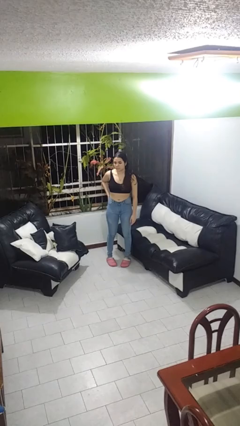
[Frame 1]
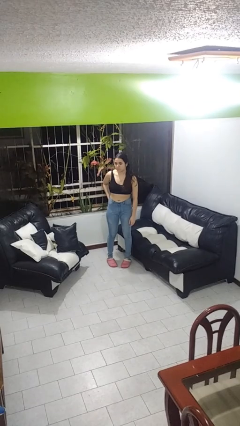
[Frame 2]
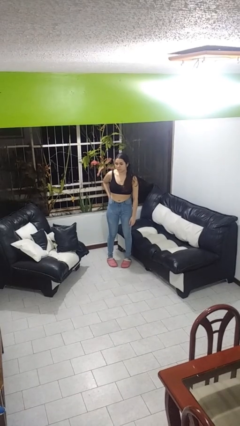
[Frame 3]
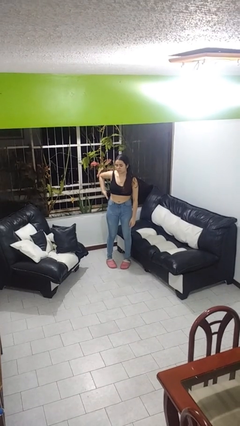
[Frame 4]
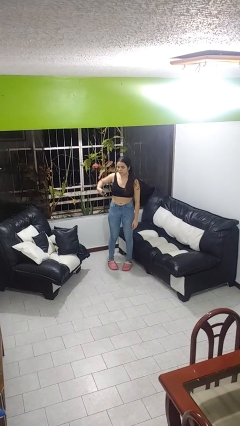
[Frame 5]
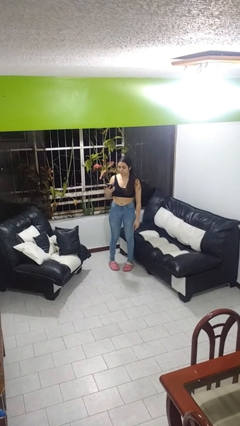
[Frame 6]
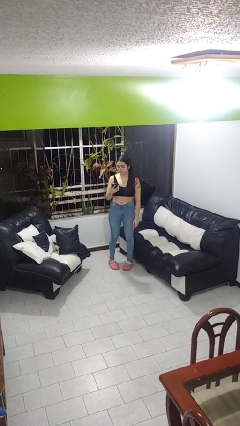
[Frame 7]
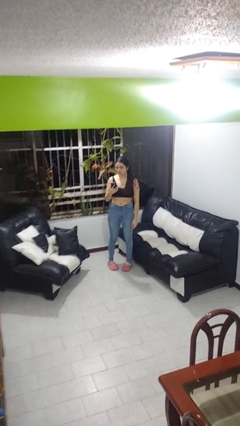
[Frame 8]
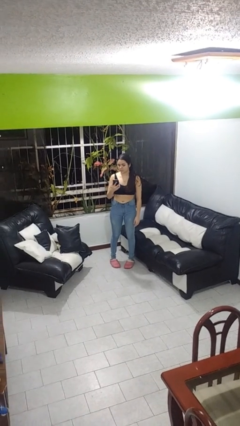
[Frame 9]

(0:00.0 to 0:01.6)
person takes phone from pocket

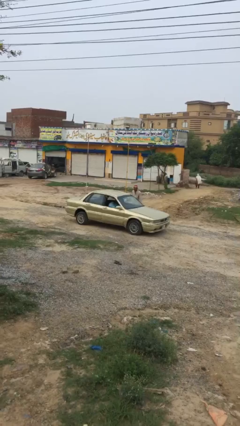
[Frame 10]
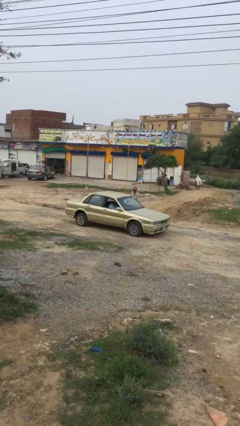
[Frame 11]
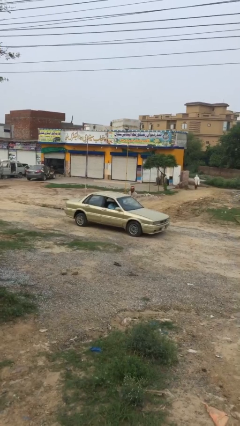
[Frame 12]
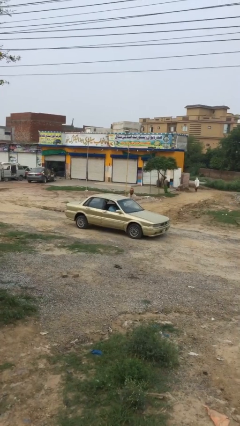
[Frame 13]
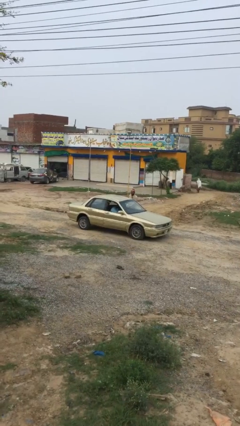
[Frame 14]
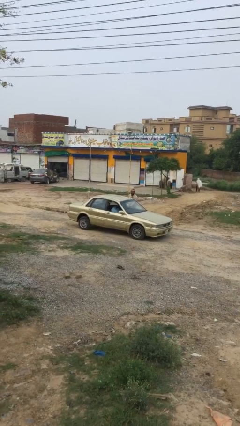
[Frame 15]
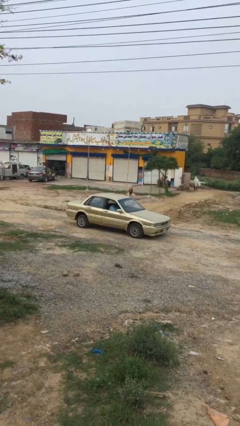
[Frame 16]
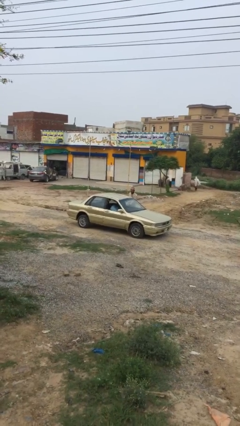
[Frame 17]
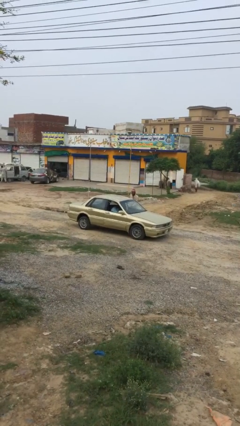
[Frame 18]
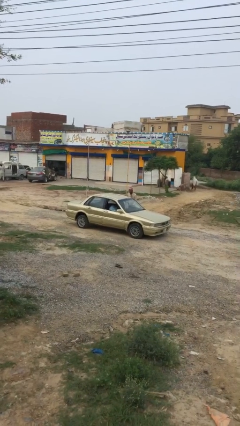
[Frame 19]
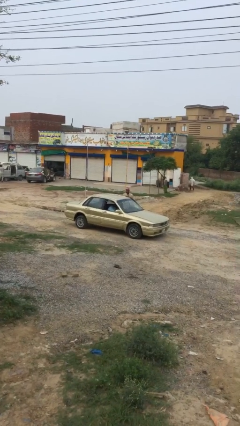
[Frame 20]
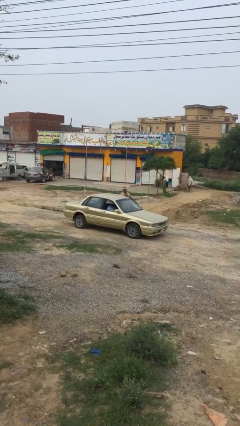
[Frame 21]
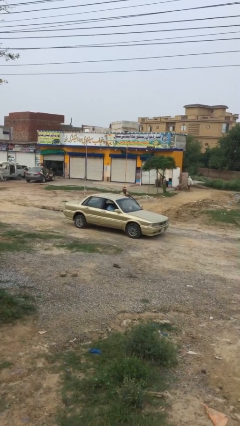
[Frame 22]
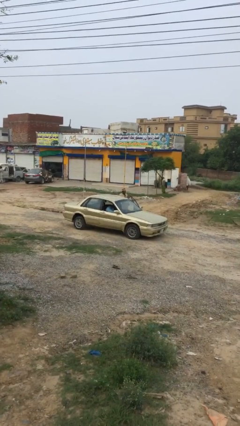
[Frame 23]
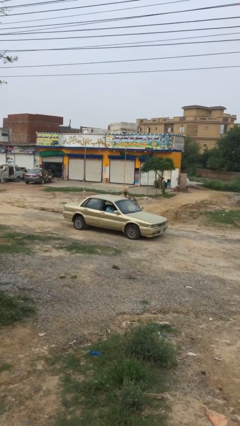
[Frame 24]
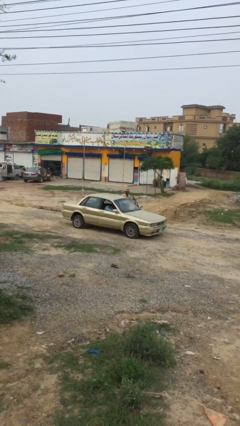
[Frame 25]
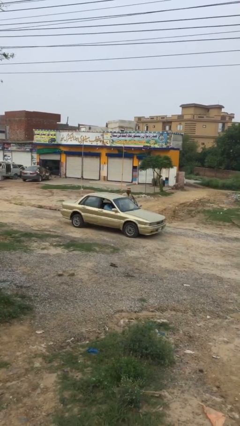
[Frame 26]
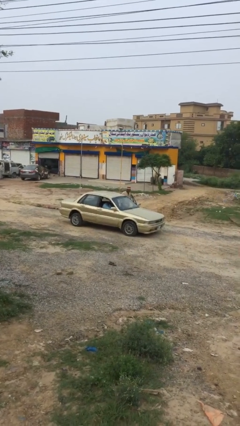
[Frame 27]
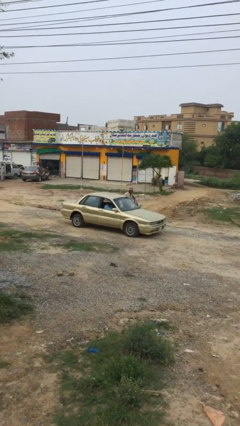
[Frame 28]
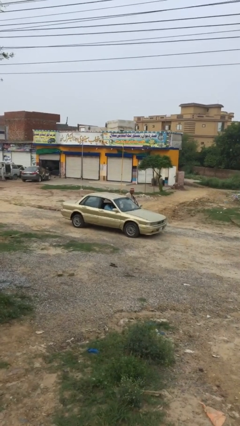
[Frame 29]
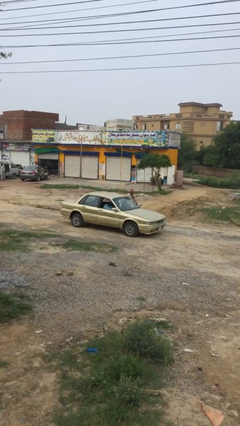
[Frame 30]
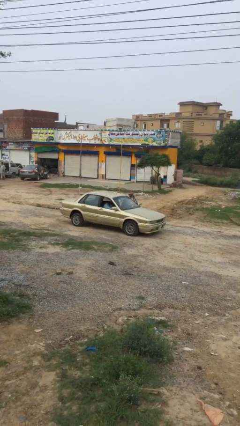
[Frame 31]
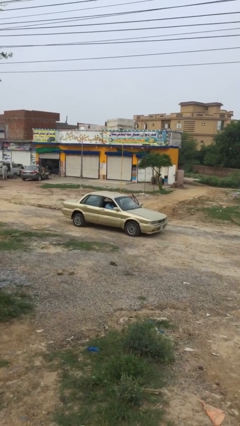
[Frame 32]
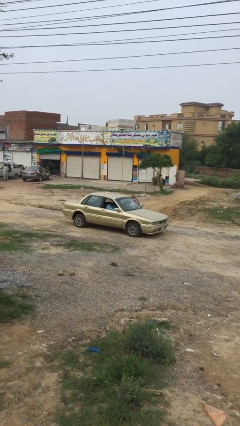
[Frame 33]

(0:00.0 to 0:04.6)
car picks up person

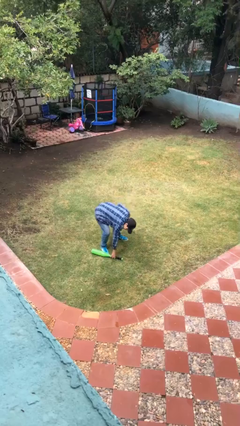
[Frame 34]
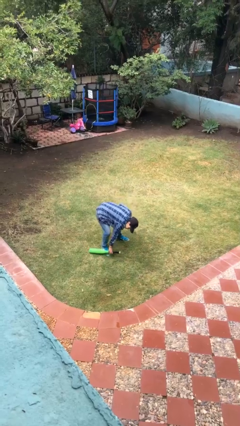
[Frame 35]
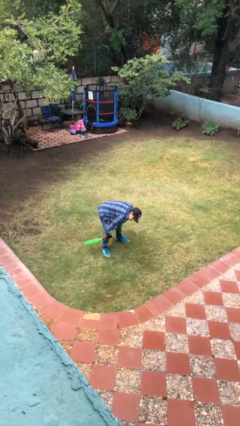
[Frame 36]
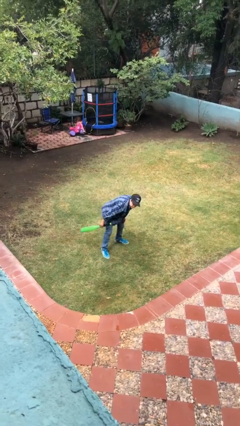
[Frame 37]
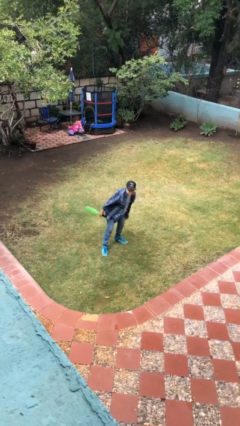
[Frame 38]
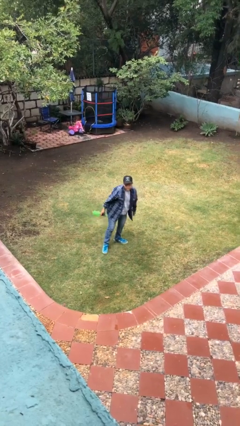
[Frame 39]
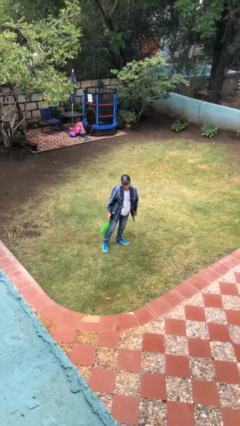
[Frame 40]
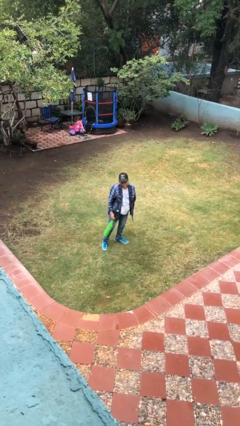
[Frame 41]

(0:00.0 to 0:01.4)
person picks up object from floor

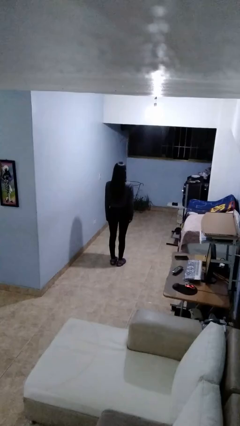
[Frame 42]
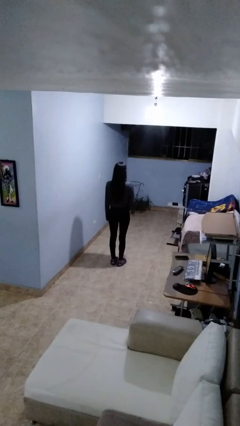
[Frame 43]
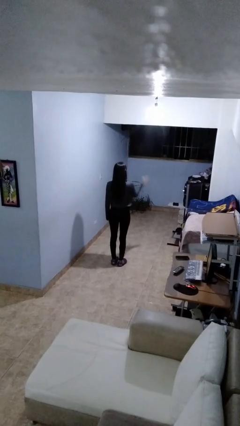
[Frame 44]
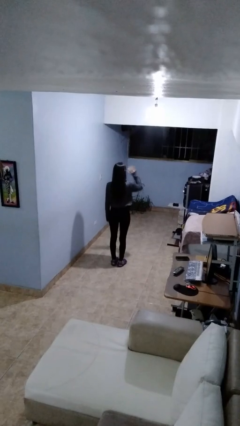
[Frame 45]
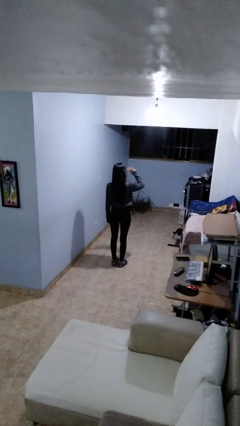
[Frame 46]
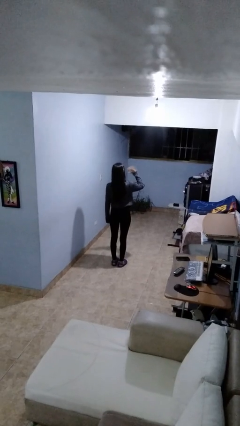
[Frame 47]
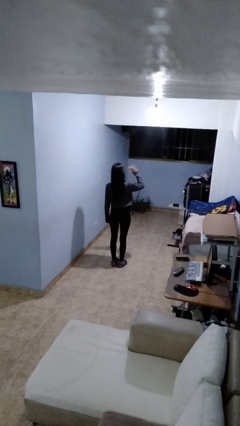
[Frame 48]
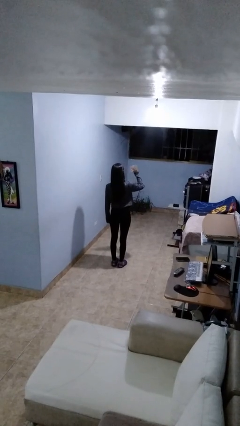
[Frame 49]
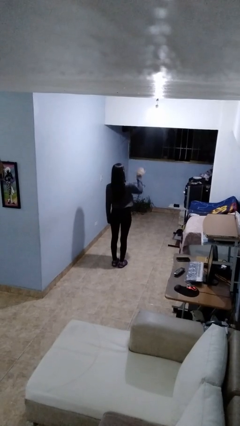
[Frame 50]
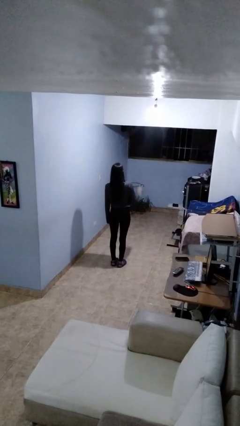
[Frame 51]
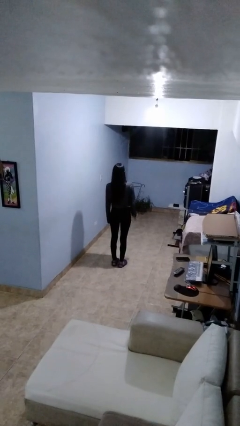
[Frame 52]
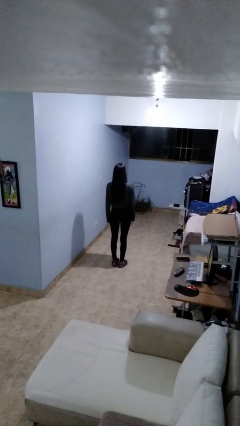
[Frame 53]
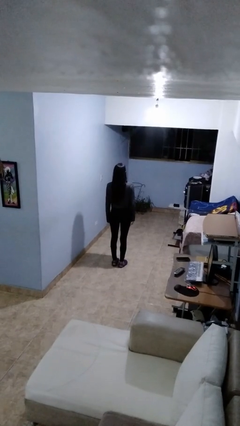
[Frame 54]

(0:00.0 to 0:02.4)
person salutes

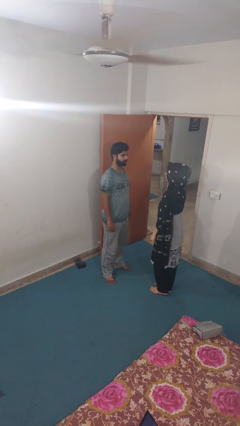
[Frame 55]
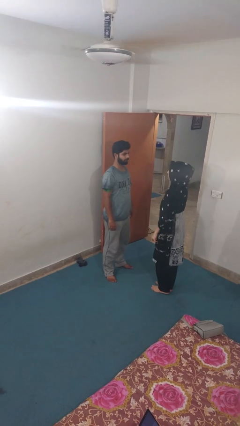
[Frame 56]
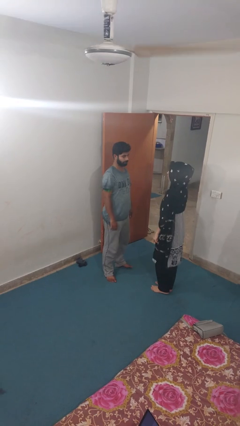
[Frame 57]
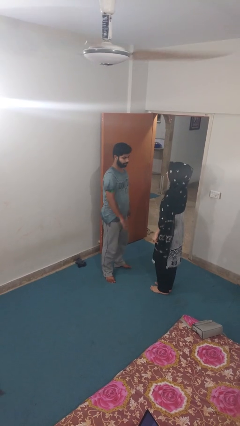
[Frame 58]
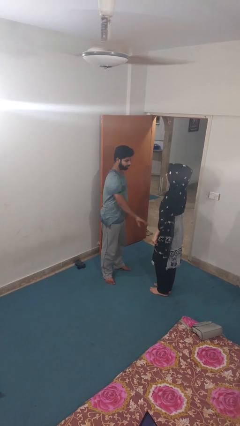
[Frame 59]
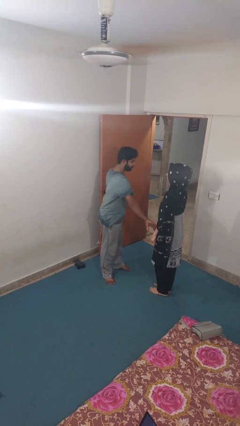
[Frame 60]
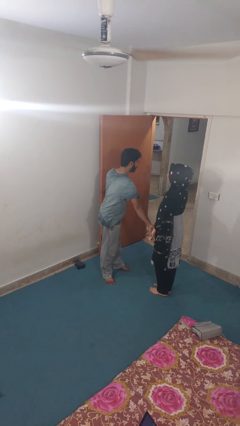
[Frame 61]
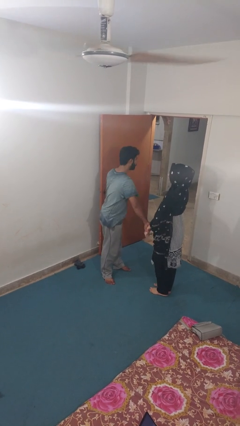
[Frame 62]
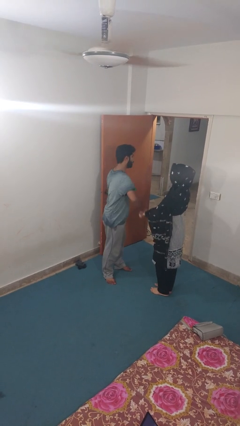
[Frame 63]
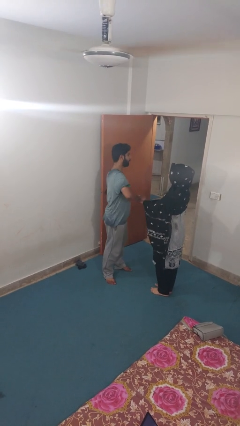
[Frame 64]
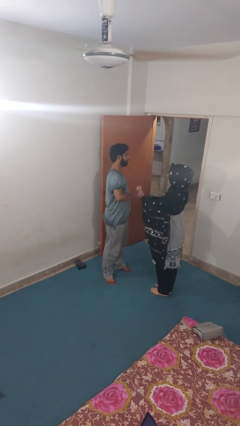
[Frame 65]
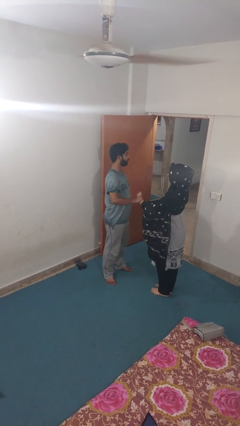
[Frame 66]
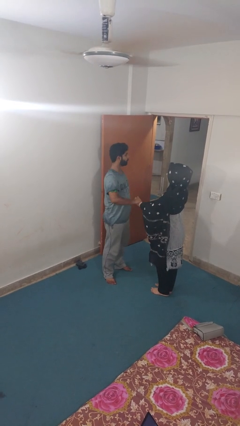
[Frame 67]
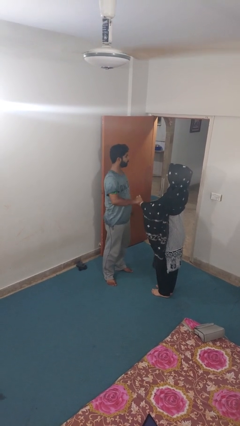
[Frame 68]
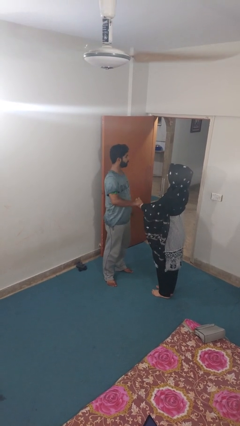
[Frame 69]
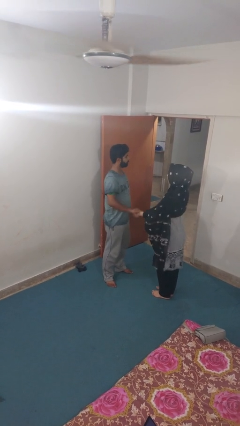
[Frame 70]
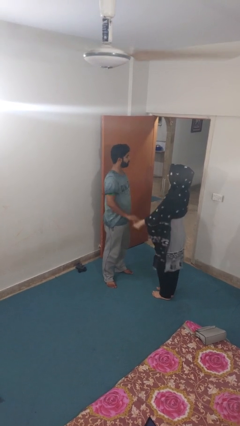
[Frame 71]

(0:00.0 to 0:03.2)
person grabs person by forearm

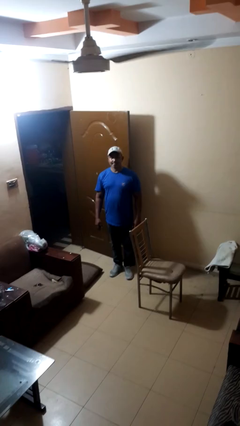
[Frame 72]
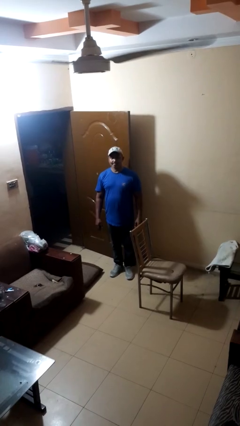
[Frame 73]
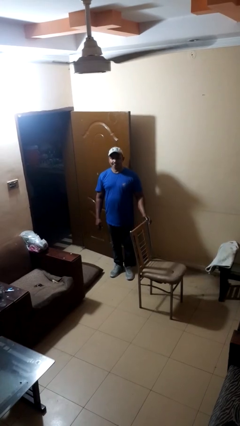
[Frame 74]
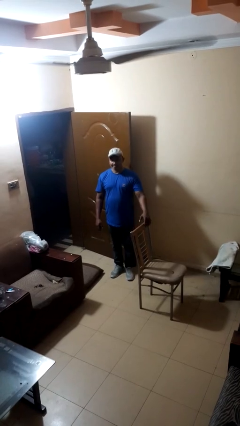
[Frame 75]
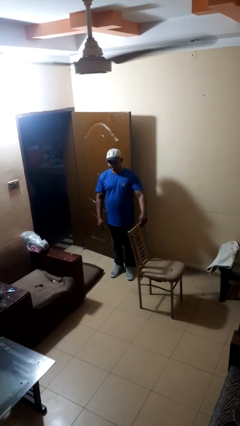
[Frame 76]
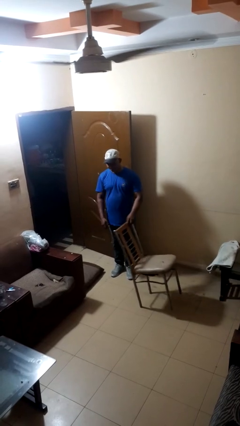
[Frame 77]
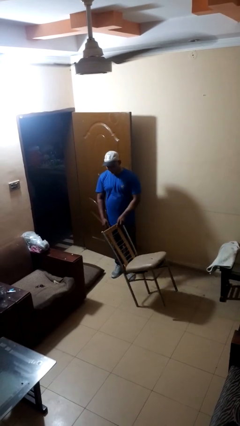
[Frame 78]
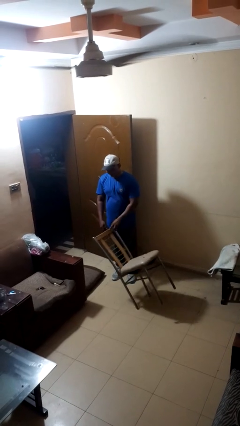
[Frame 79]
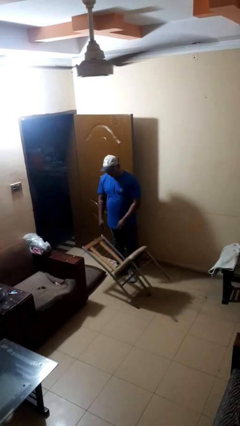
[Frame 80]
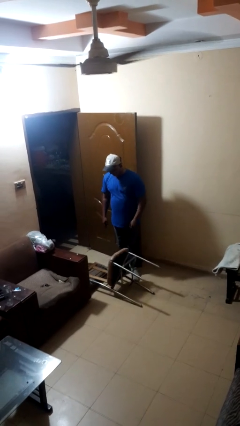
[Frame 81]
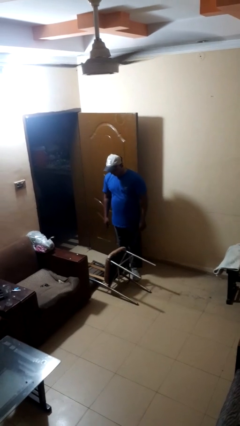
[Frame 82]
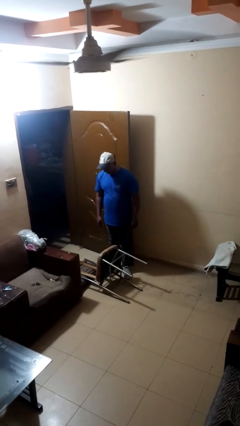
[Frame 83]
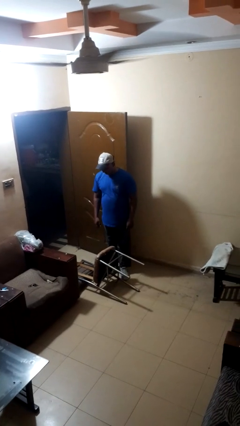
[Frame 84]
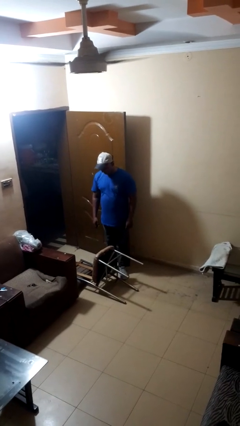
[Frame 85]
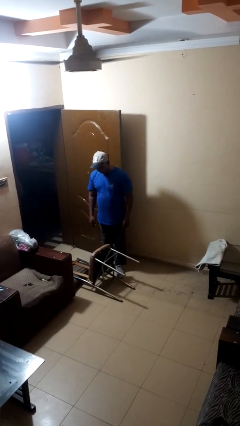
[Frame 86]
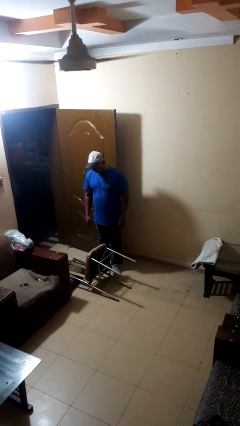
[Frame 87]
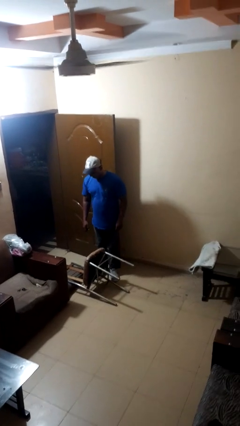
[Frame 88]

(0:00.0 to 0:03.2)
person knocks over furniture

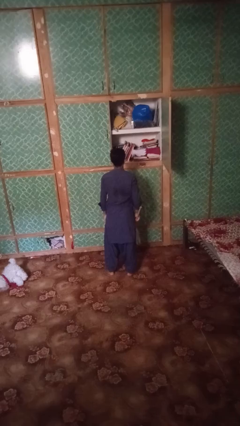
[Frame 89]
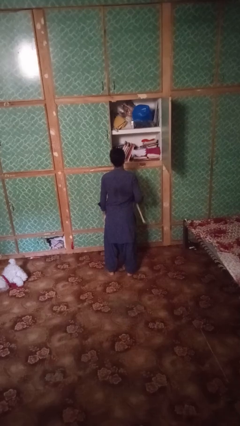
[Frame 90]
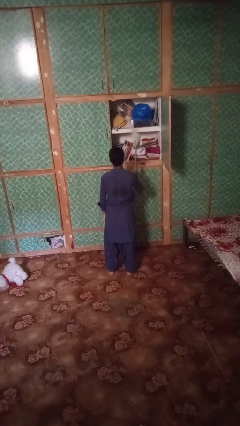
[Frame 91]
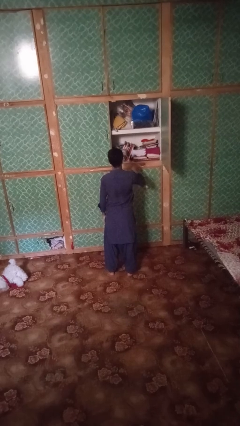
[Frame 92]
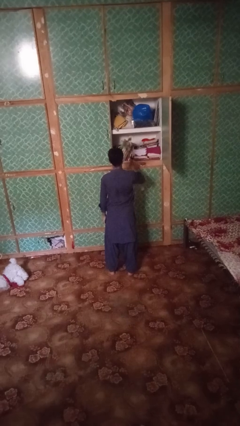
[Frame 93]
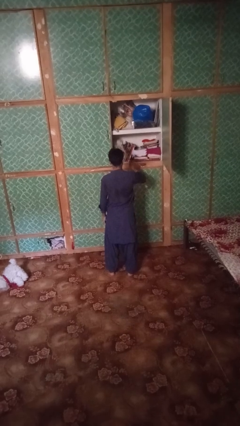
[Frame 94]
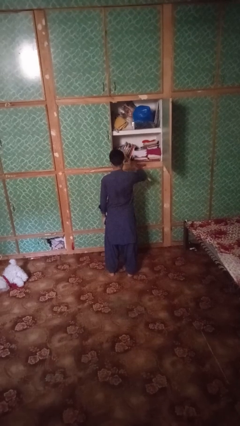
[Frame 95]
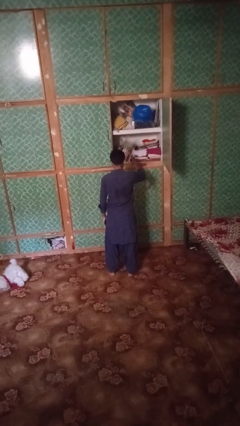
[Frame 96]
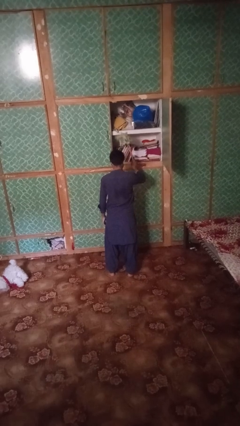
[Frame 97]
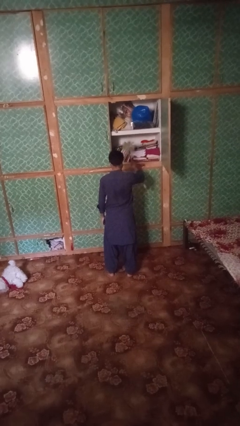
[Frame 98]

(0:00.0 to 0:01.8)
person dusts furniture